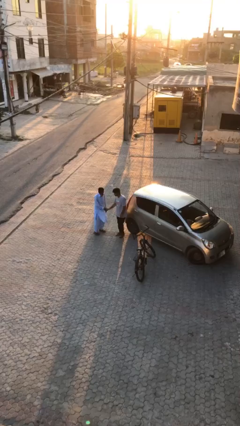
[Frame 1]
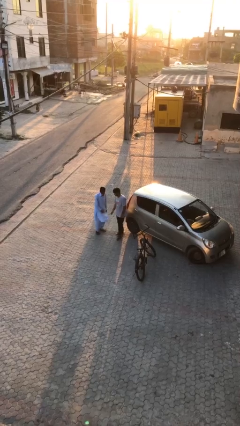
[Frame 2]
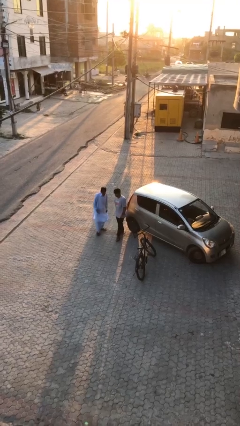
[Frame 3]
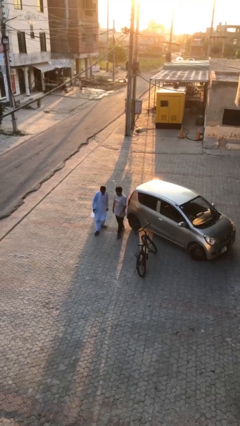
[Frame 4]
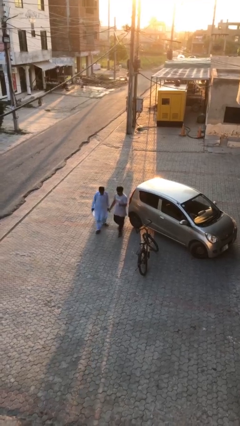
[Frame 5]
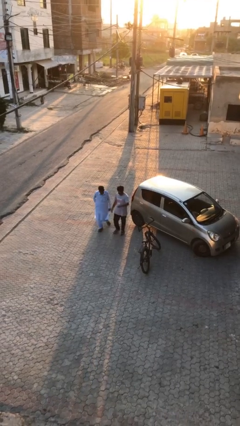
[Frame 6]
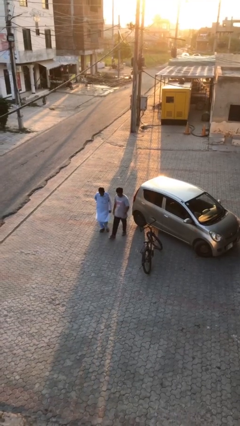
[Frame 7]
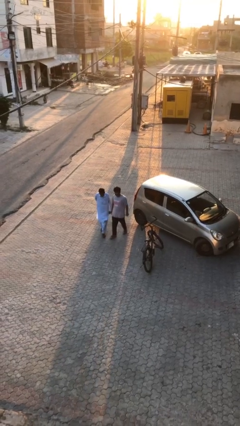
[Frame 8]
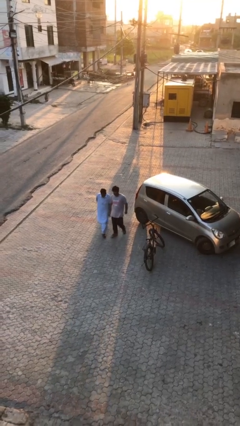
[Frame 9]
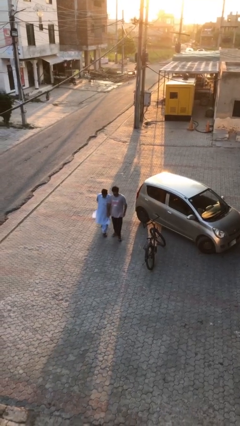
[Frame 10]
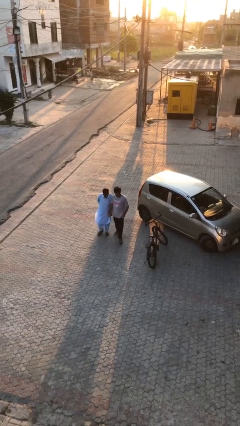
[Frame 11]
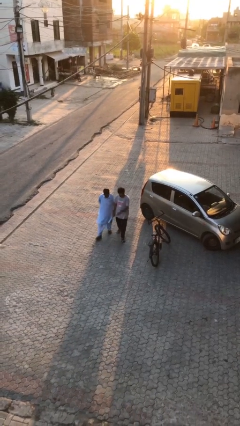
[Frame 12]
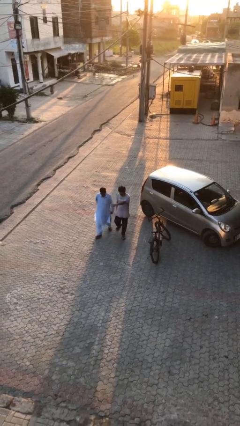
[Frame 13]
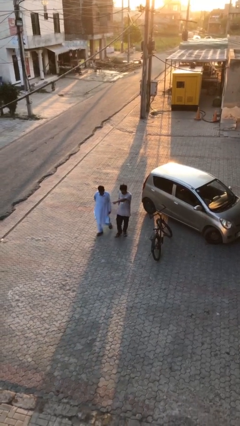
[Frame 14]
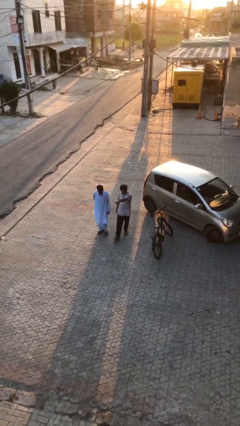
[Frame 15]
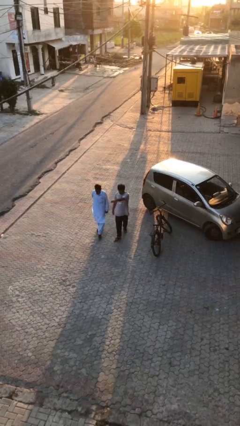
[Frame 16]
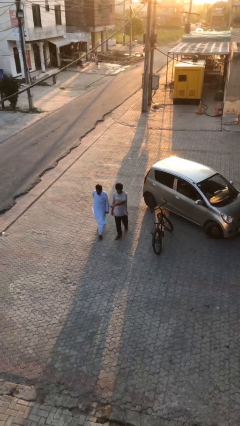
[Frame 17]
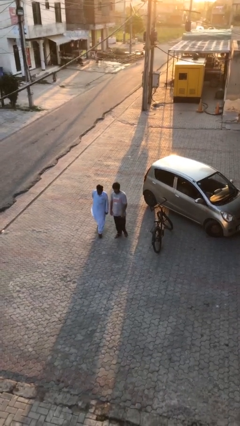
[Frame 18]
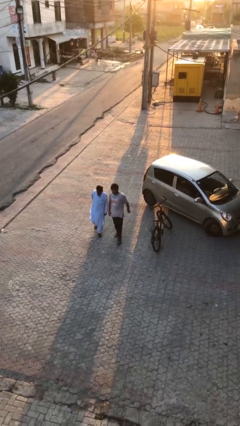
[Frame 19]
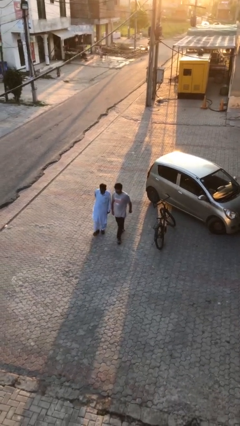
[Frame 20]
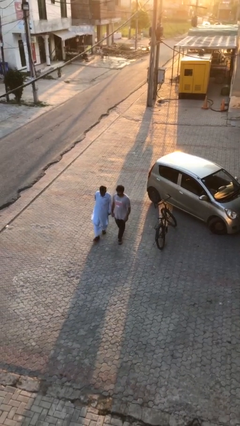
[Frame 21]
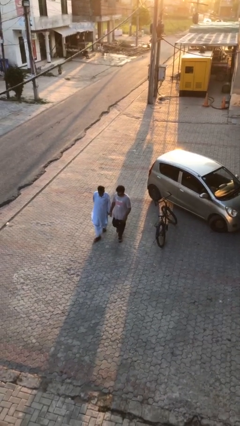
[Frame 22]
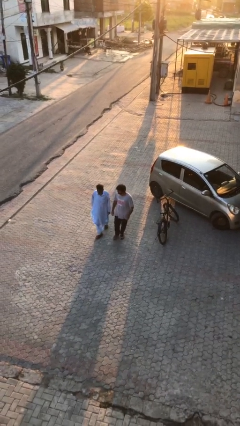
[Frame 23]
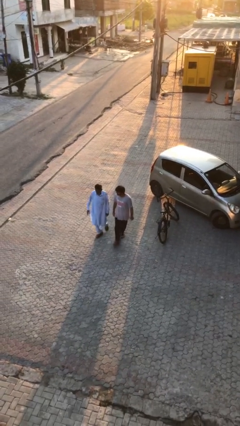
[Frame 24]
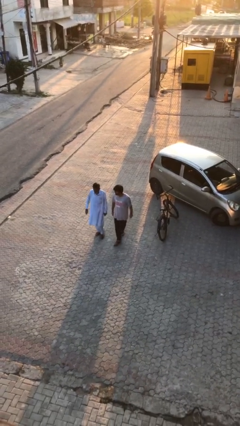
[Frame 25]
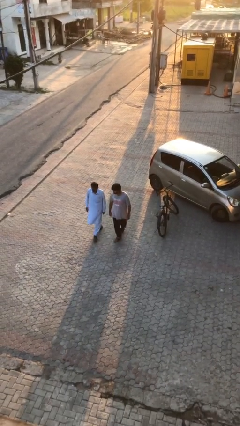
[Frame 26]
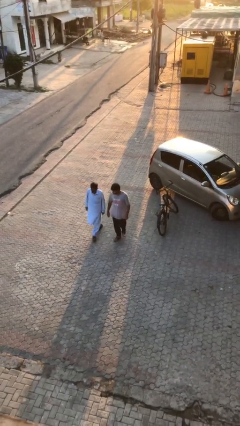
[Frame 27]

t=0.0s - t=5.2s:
person talks to person

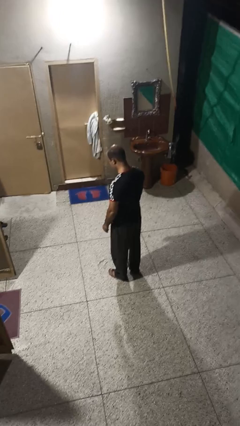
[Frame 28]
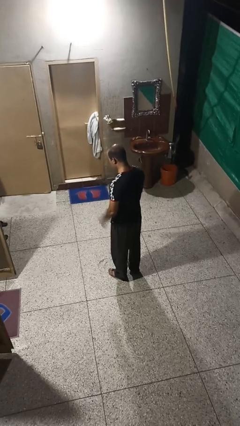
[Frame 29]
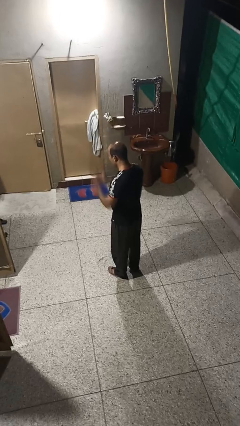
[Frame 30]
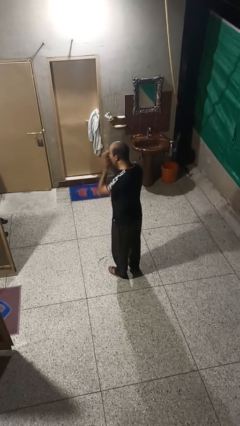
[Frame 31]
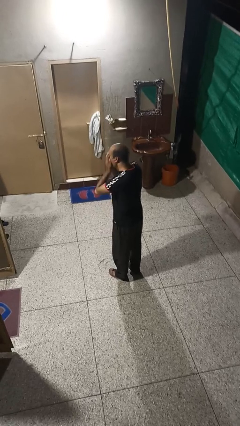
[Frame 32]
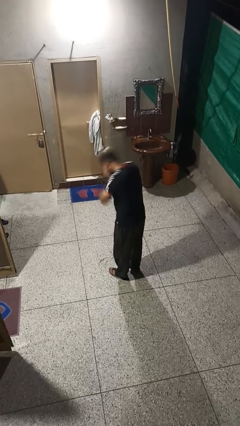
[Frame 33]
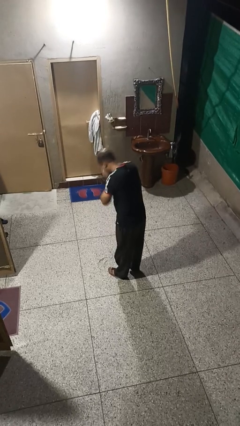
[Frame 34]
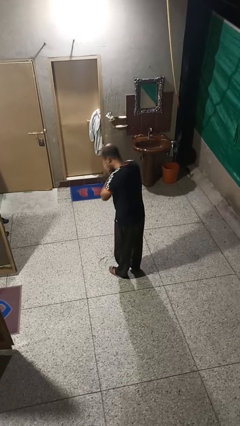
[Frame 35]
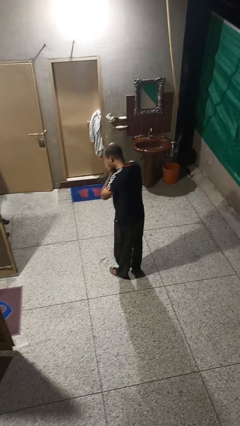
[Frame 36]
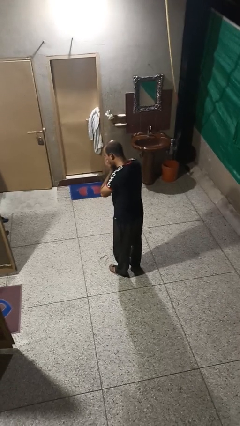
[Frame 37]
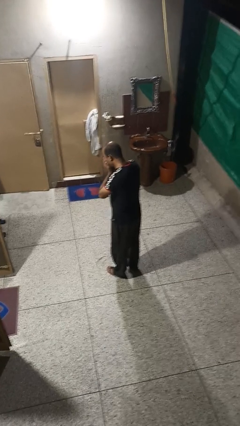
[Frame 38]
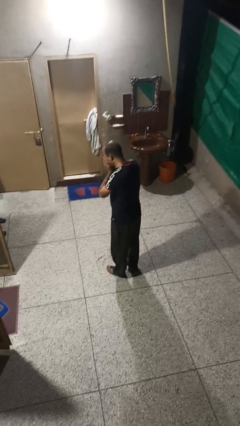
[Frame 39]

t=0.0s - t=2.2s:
person sneezes into hand

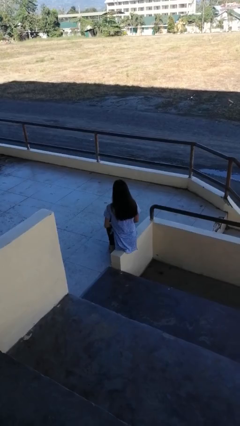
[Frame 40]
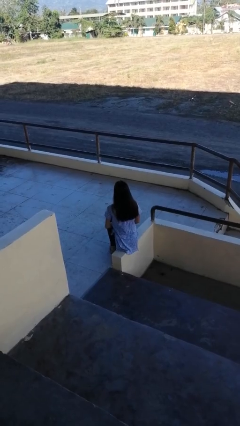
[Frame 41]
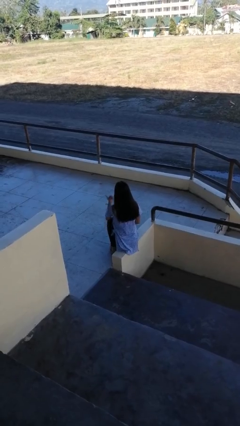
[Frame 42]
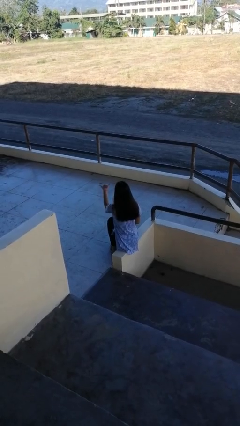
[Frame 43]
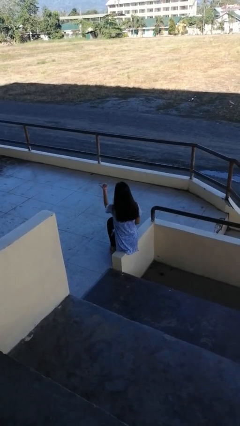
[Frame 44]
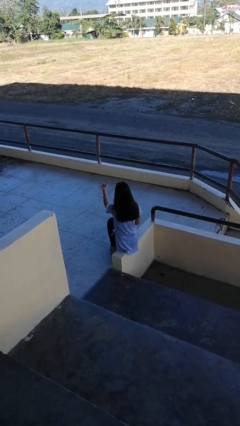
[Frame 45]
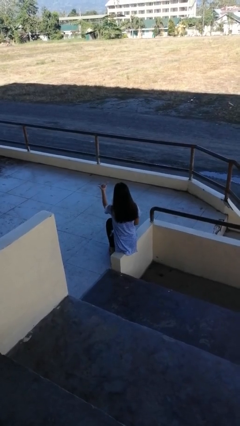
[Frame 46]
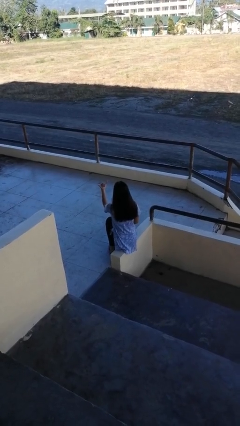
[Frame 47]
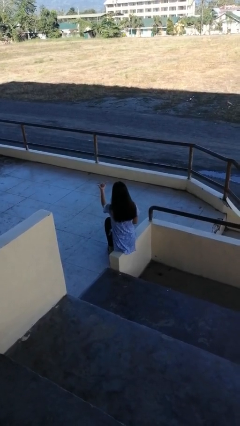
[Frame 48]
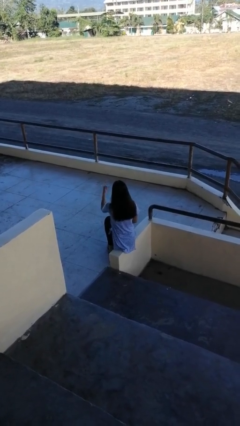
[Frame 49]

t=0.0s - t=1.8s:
person gestures hang loose

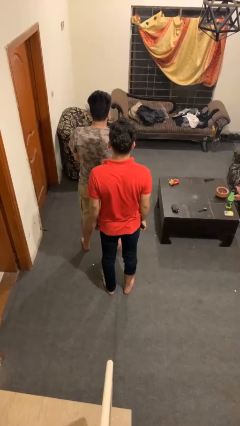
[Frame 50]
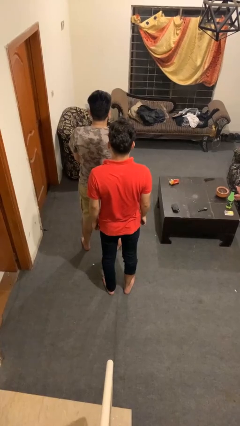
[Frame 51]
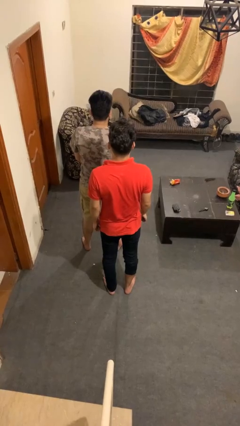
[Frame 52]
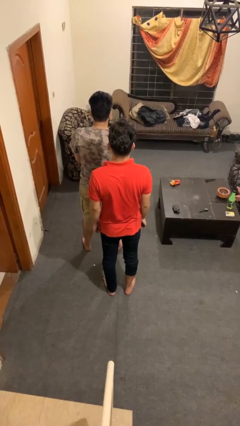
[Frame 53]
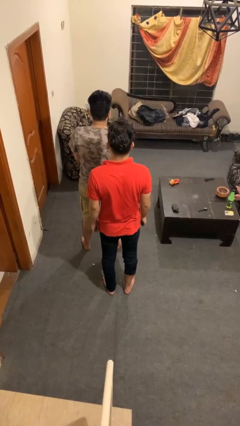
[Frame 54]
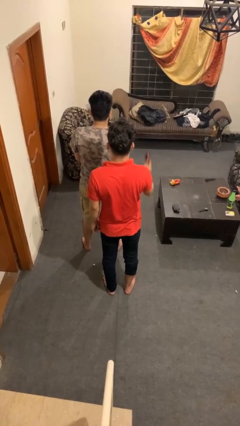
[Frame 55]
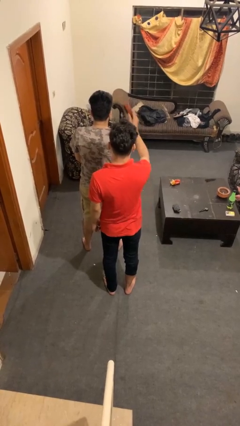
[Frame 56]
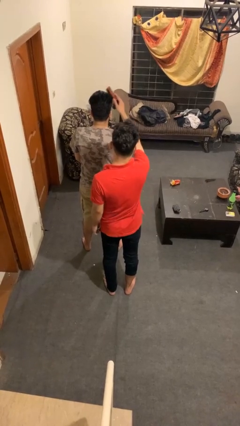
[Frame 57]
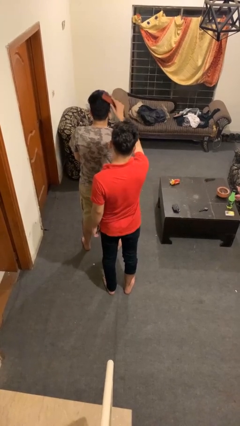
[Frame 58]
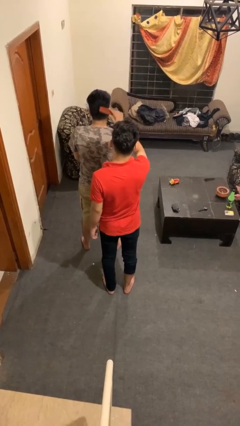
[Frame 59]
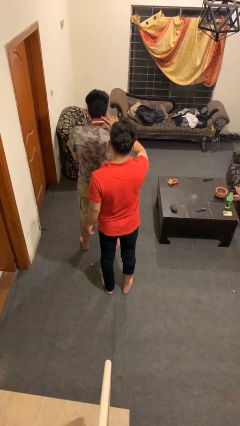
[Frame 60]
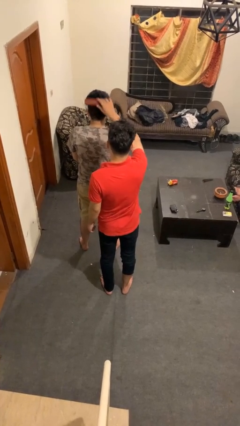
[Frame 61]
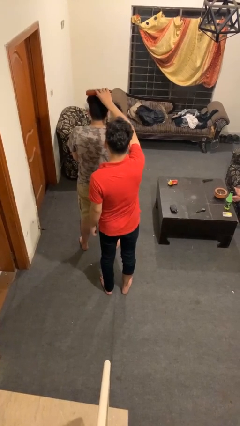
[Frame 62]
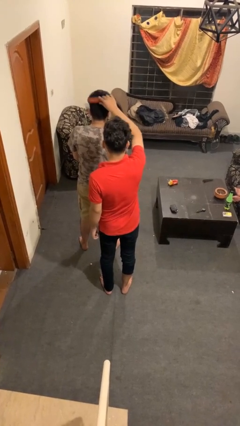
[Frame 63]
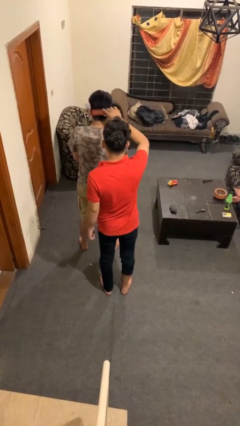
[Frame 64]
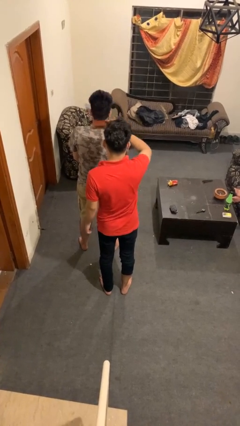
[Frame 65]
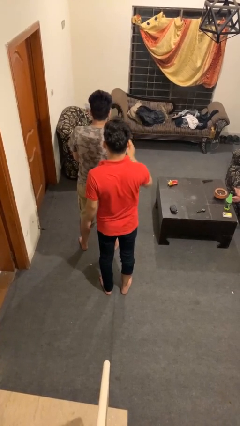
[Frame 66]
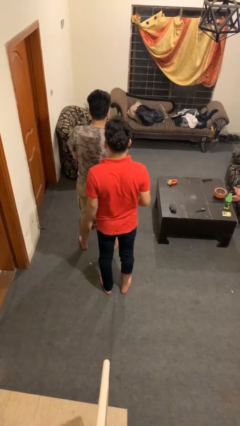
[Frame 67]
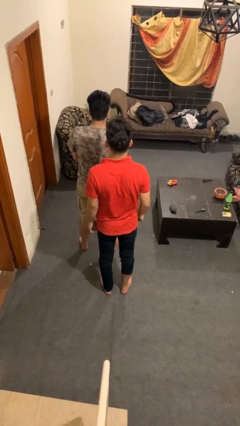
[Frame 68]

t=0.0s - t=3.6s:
person brushes hair of person

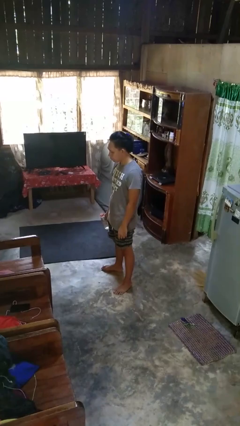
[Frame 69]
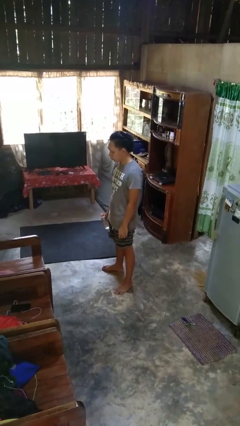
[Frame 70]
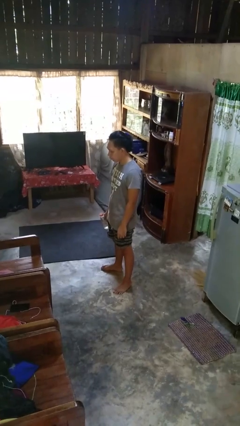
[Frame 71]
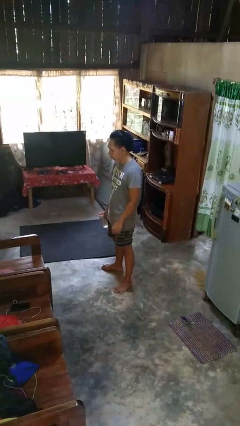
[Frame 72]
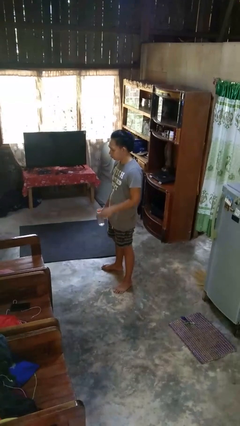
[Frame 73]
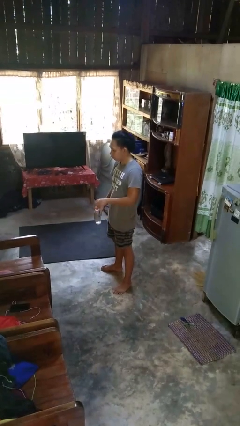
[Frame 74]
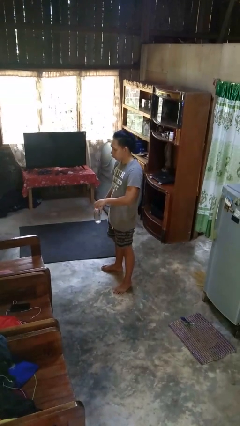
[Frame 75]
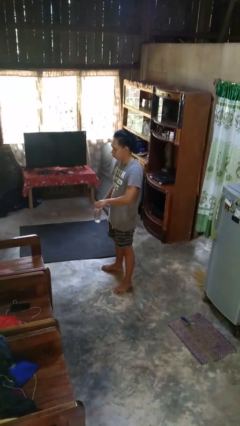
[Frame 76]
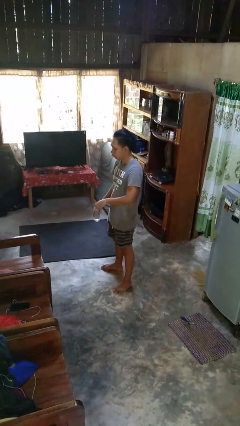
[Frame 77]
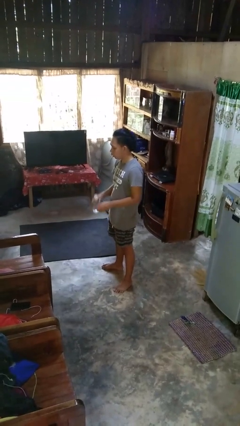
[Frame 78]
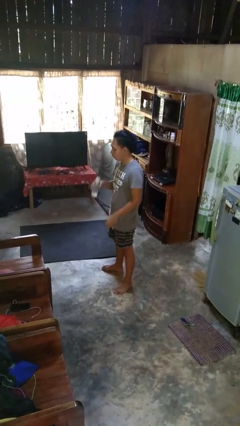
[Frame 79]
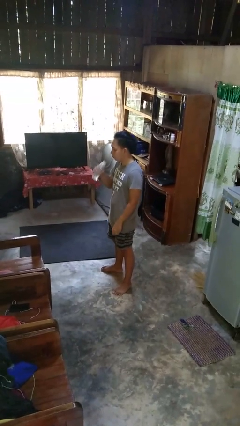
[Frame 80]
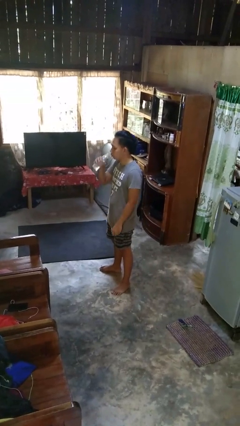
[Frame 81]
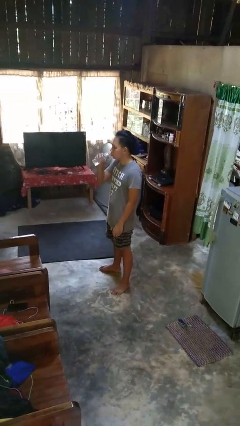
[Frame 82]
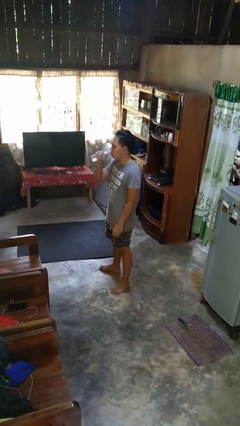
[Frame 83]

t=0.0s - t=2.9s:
person drinks from bottle

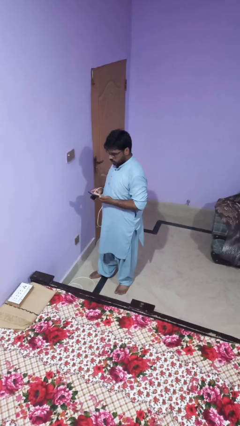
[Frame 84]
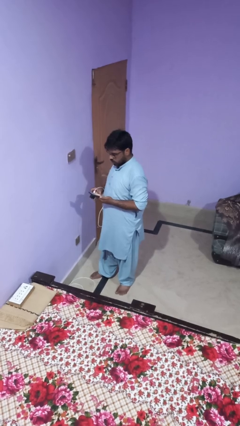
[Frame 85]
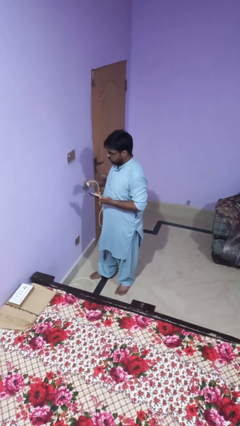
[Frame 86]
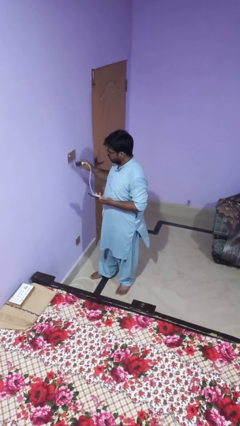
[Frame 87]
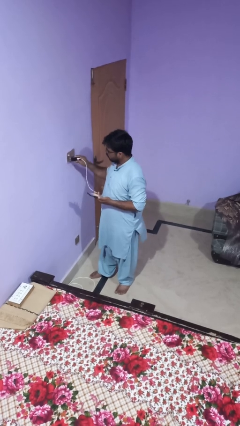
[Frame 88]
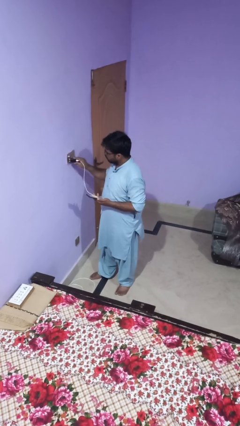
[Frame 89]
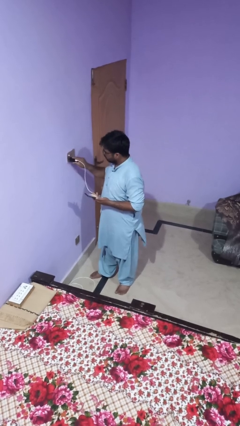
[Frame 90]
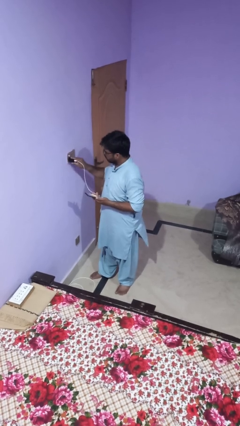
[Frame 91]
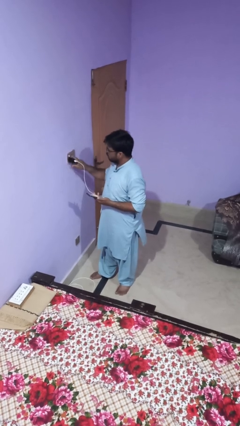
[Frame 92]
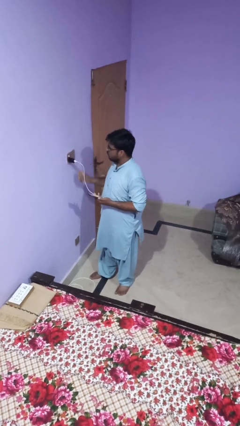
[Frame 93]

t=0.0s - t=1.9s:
person plugs into electrical socket
